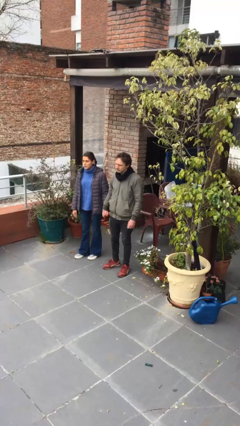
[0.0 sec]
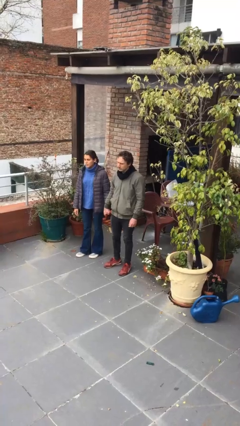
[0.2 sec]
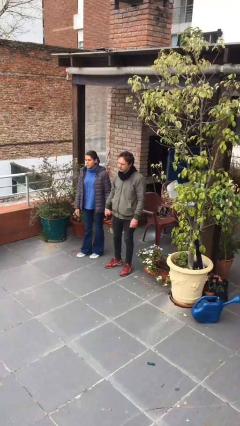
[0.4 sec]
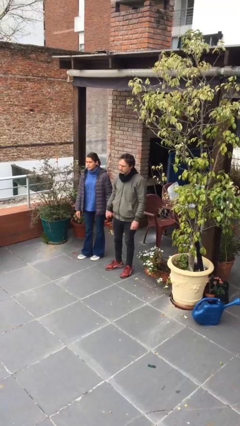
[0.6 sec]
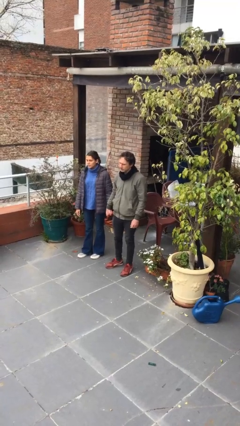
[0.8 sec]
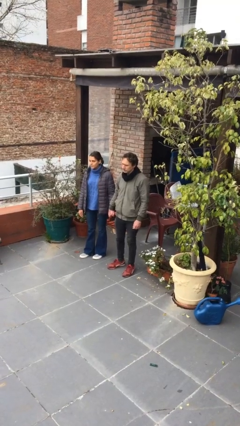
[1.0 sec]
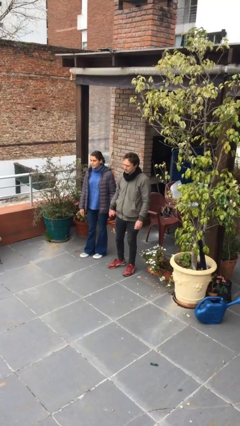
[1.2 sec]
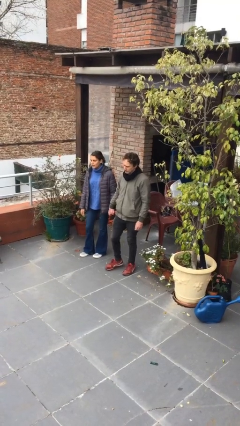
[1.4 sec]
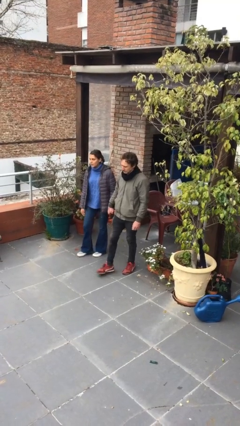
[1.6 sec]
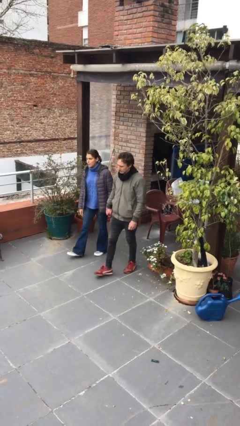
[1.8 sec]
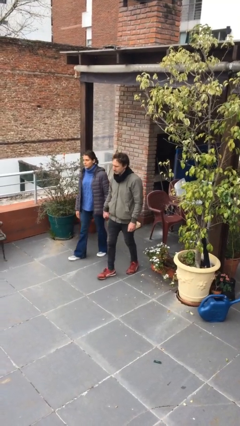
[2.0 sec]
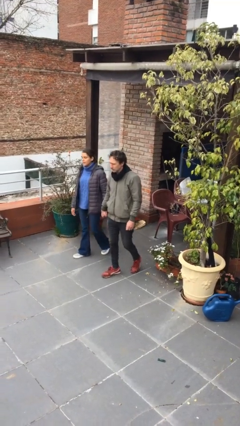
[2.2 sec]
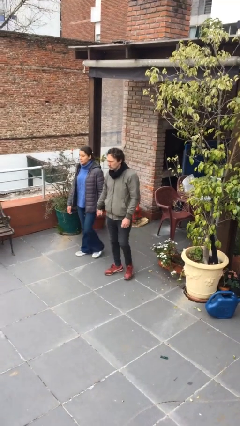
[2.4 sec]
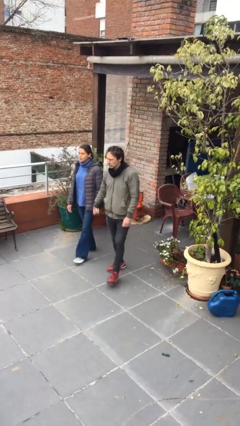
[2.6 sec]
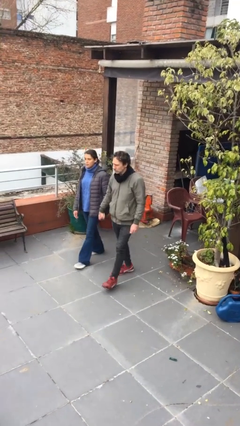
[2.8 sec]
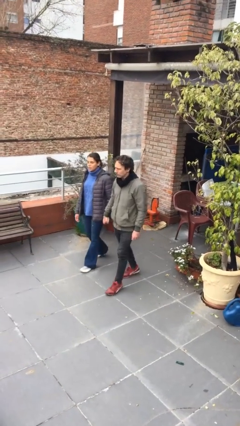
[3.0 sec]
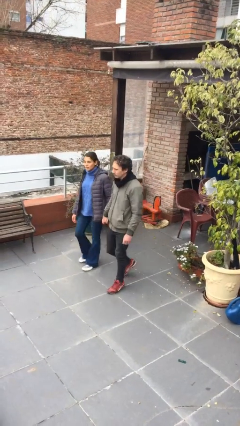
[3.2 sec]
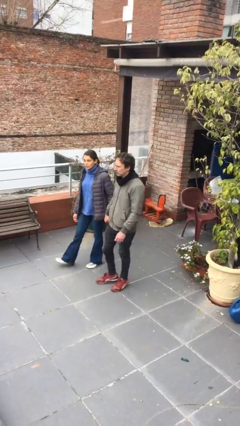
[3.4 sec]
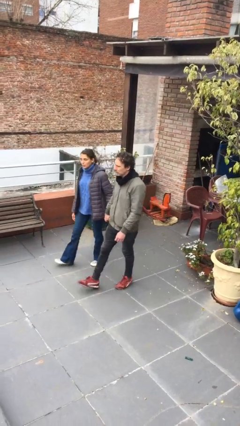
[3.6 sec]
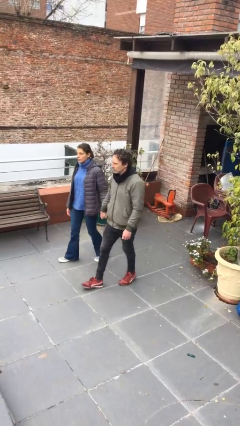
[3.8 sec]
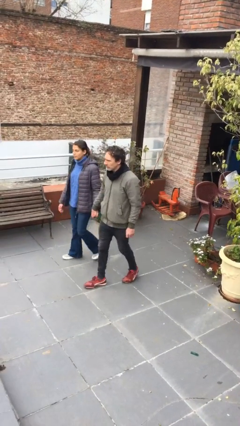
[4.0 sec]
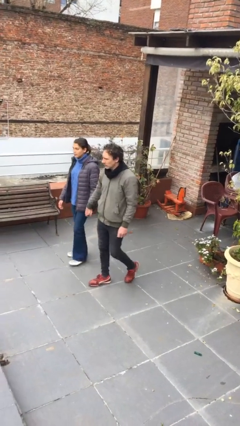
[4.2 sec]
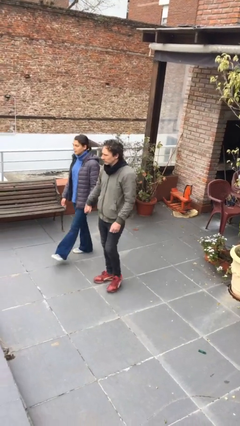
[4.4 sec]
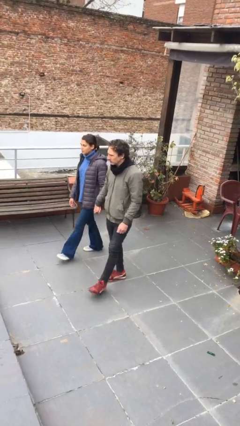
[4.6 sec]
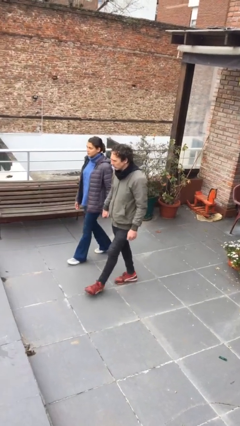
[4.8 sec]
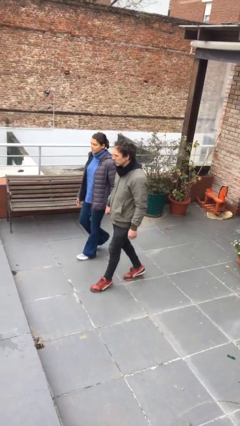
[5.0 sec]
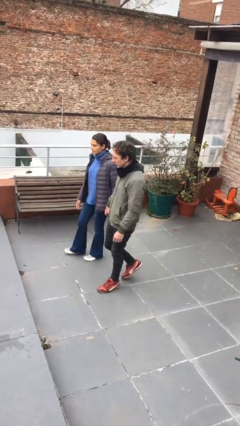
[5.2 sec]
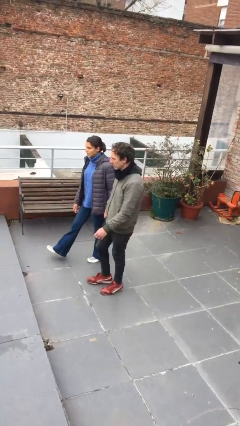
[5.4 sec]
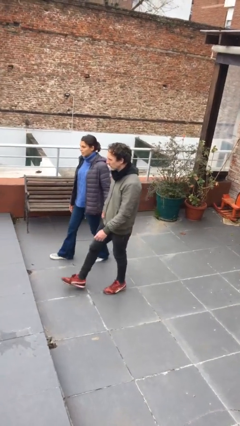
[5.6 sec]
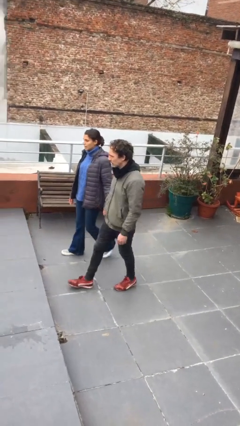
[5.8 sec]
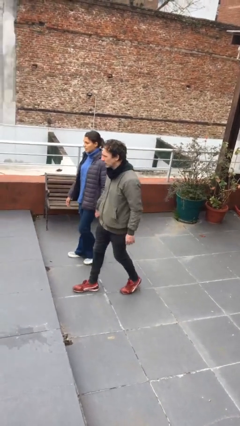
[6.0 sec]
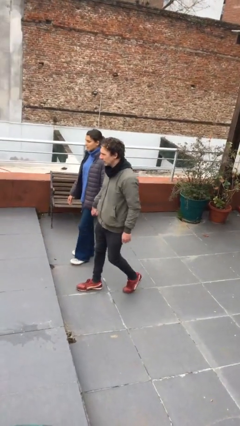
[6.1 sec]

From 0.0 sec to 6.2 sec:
person holds hand

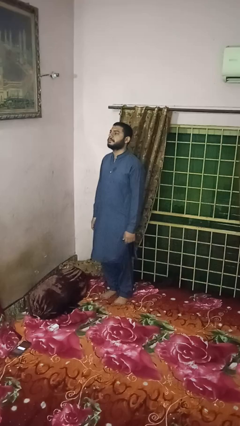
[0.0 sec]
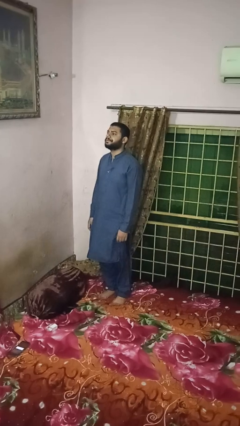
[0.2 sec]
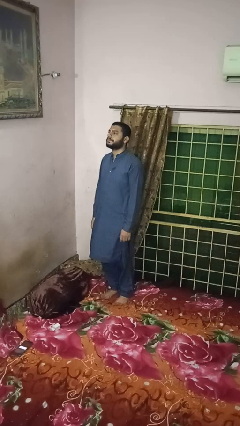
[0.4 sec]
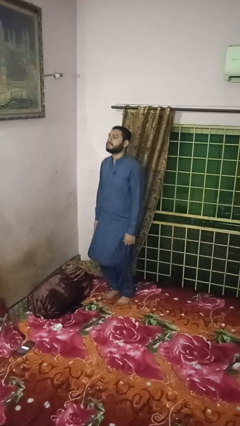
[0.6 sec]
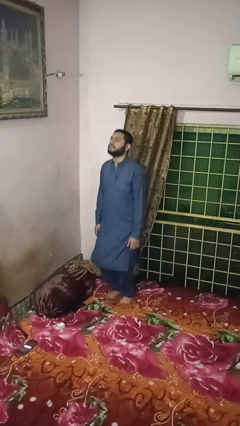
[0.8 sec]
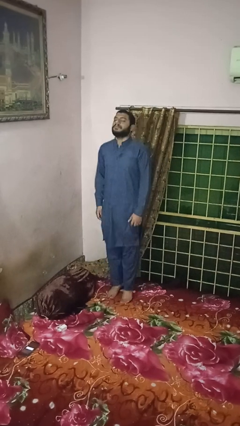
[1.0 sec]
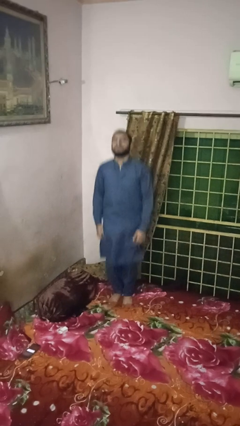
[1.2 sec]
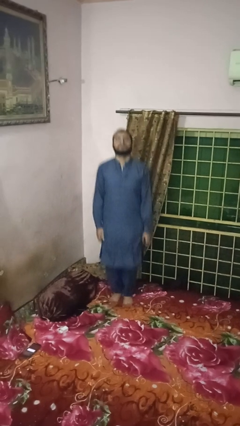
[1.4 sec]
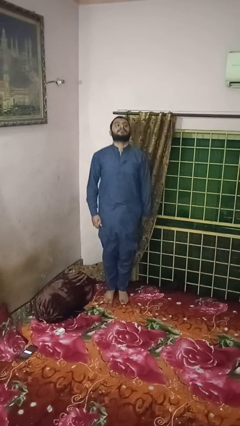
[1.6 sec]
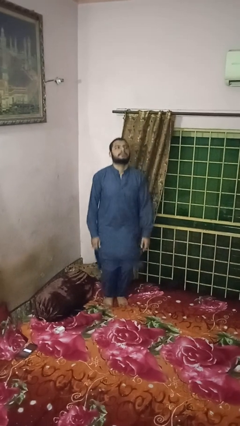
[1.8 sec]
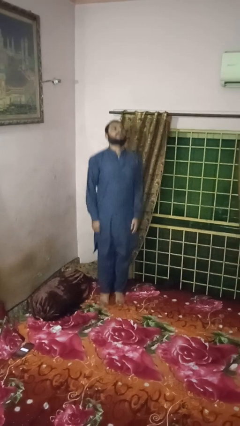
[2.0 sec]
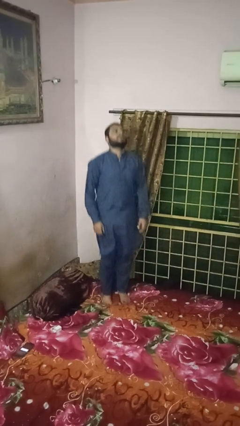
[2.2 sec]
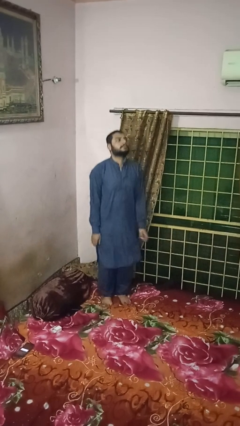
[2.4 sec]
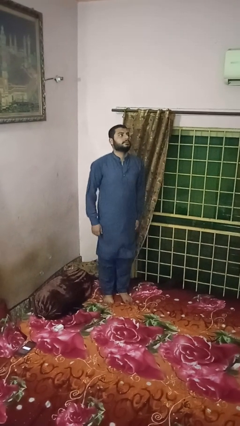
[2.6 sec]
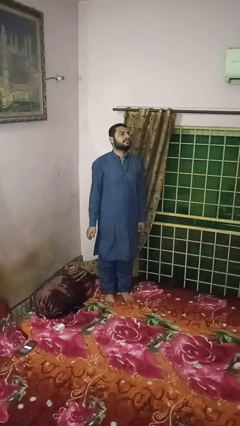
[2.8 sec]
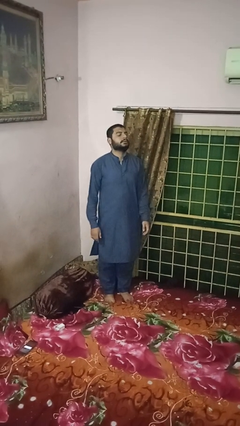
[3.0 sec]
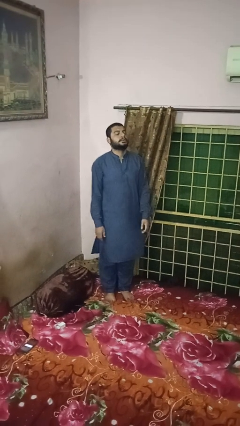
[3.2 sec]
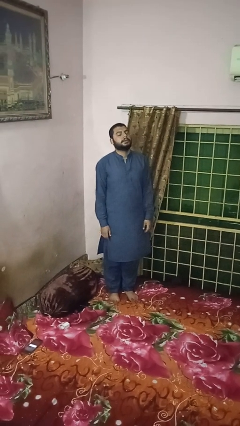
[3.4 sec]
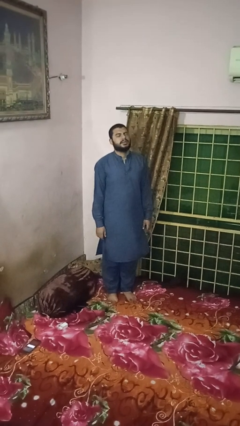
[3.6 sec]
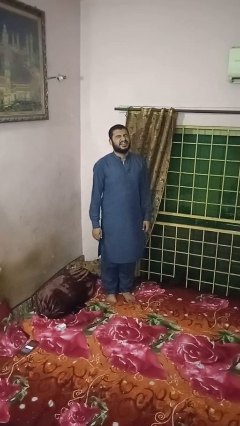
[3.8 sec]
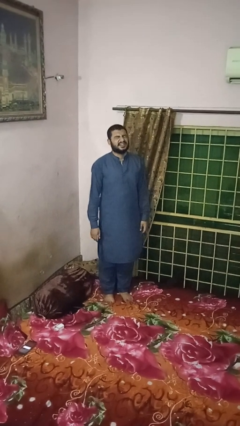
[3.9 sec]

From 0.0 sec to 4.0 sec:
person jumps on bed

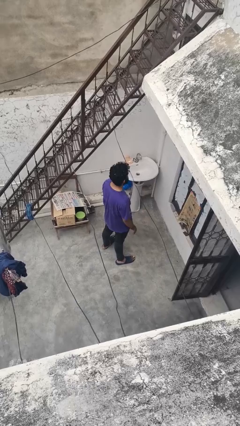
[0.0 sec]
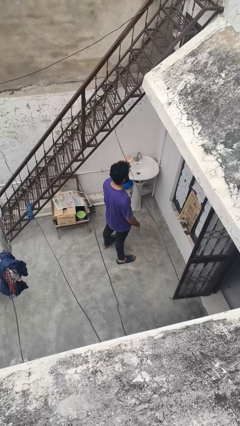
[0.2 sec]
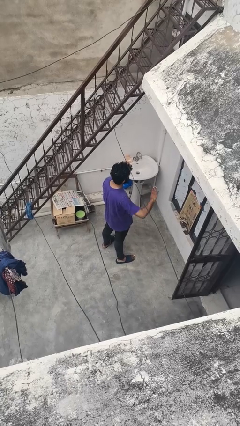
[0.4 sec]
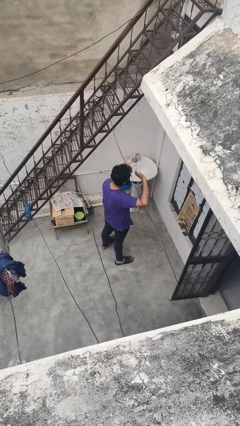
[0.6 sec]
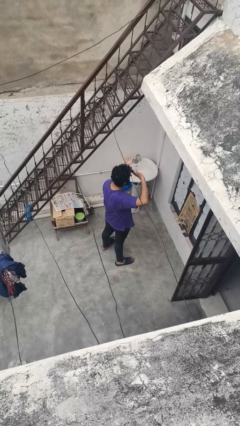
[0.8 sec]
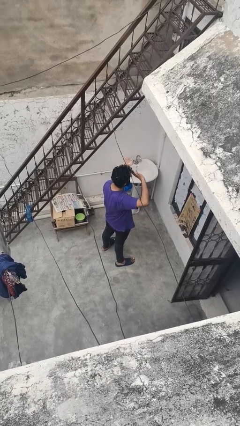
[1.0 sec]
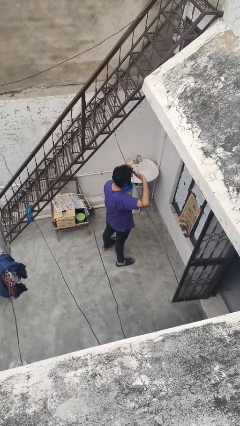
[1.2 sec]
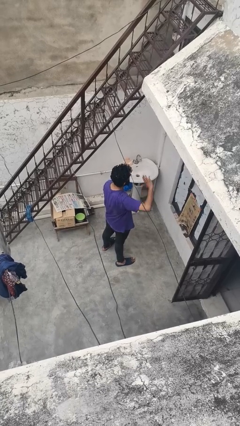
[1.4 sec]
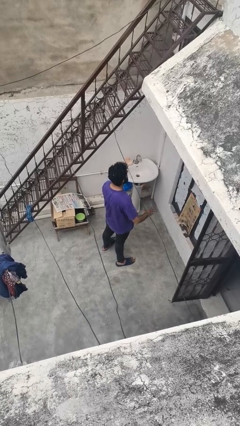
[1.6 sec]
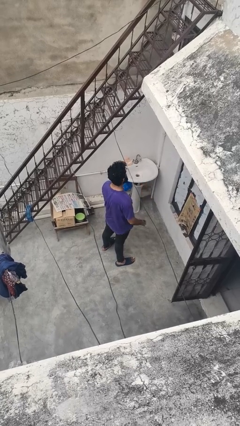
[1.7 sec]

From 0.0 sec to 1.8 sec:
person salutes

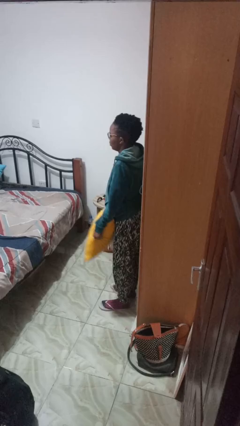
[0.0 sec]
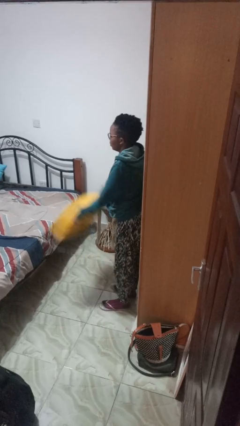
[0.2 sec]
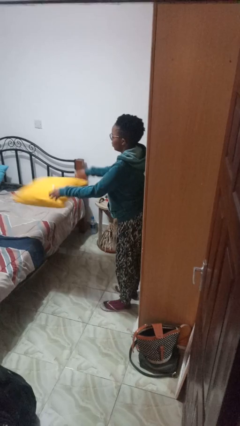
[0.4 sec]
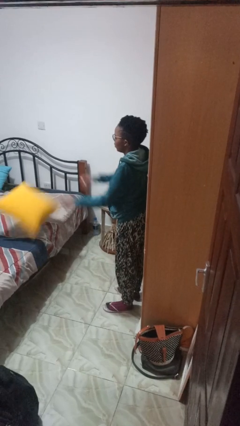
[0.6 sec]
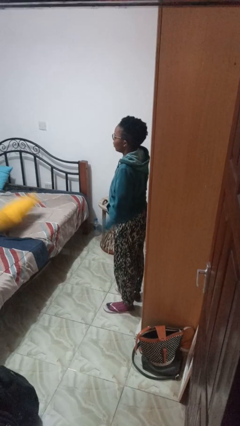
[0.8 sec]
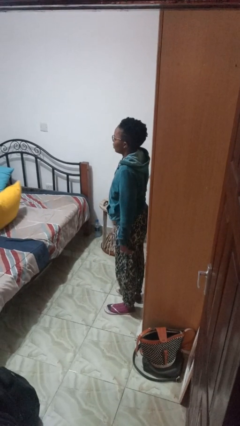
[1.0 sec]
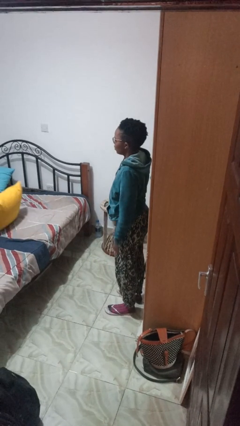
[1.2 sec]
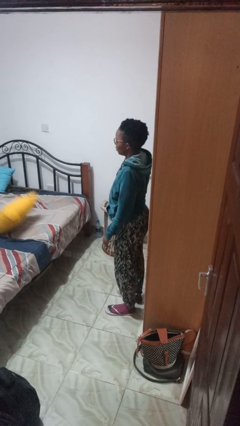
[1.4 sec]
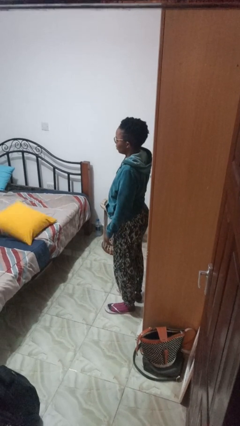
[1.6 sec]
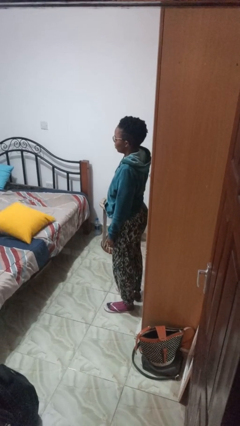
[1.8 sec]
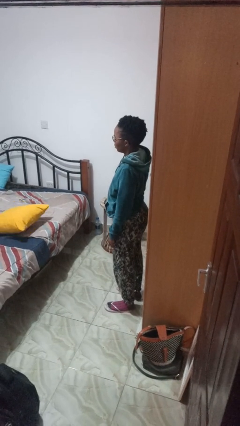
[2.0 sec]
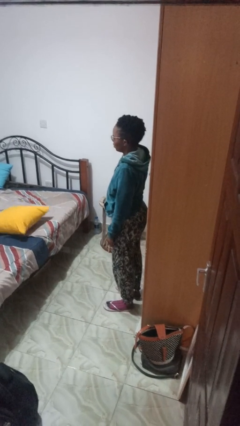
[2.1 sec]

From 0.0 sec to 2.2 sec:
person throws object on bed

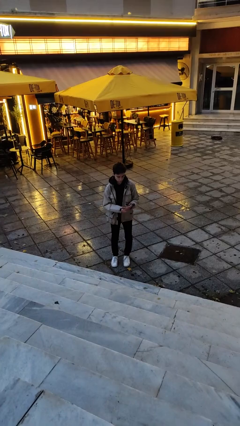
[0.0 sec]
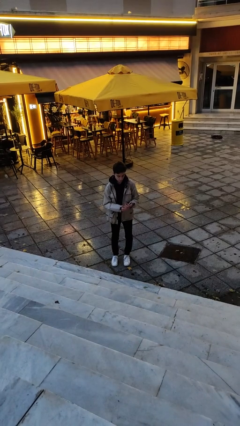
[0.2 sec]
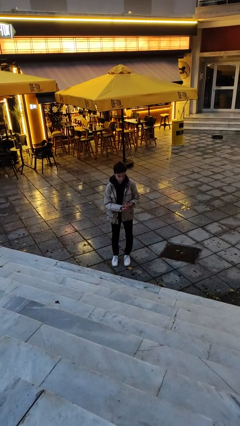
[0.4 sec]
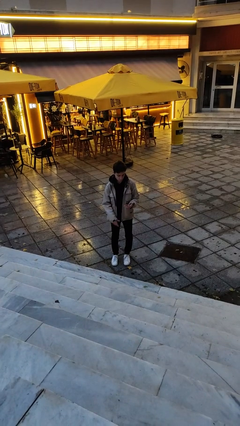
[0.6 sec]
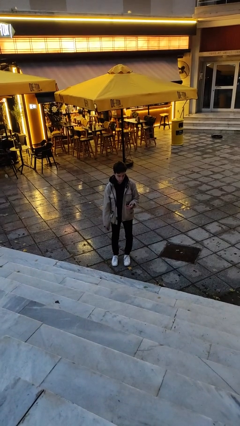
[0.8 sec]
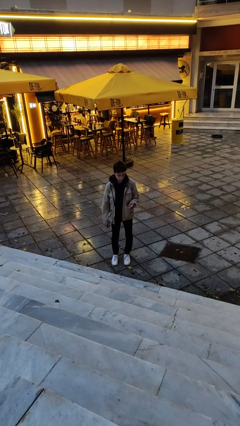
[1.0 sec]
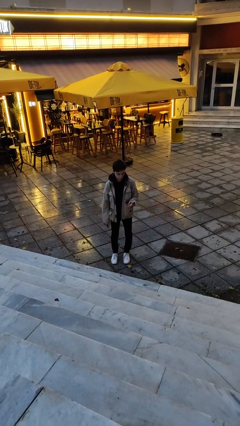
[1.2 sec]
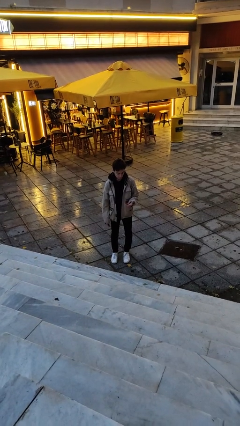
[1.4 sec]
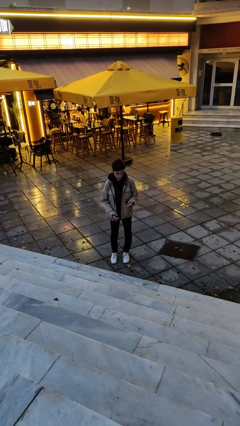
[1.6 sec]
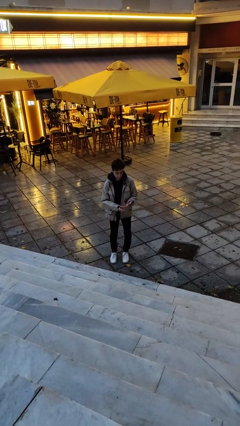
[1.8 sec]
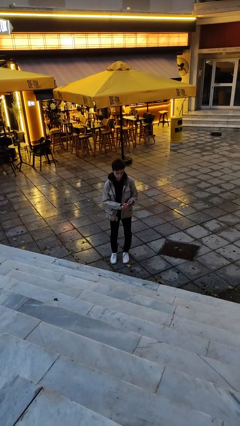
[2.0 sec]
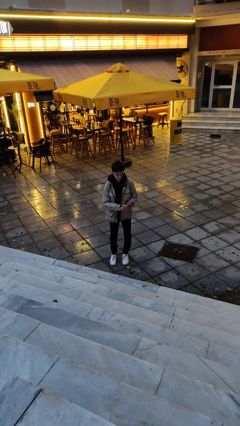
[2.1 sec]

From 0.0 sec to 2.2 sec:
person puts on ring

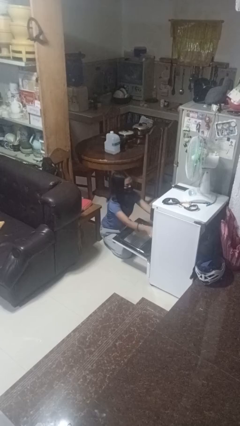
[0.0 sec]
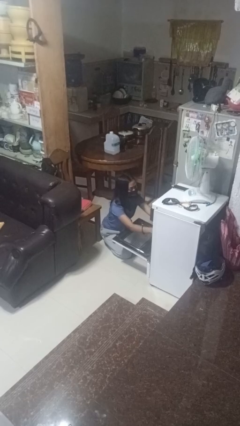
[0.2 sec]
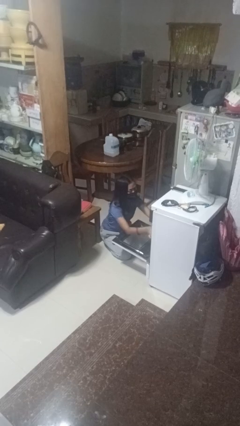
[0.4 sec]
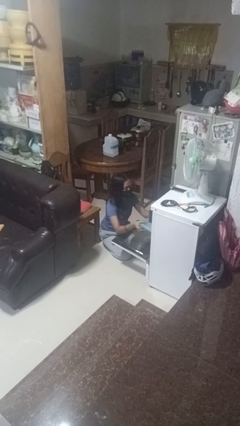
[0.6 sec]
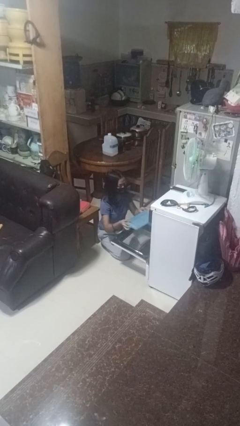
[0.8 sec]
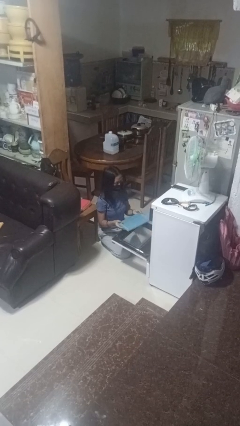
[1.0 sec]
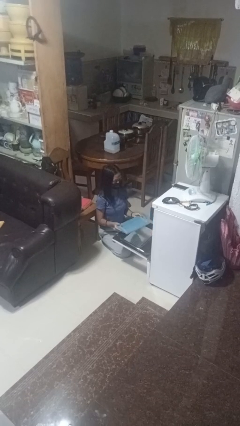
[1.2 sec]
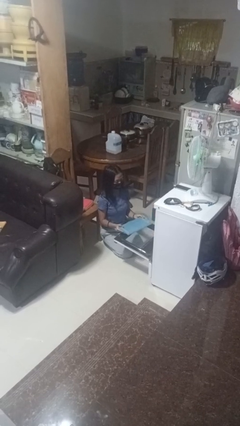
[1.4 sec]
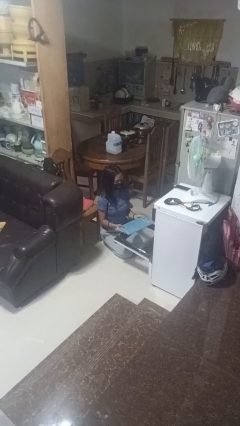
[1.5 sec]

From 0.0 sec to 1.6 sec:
person takes object from oven
